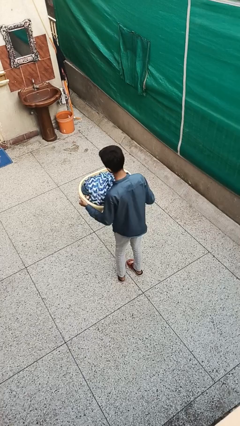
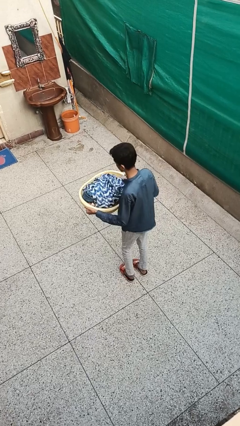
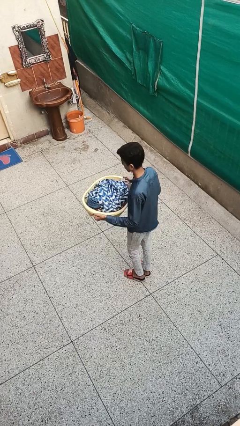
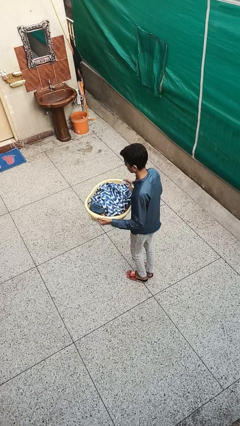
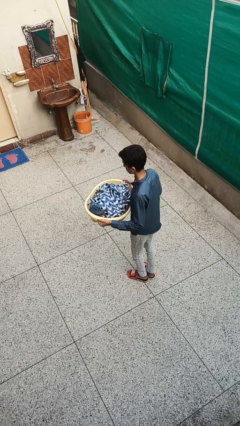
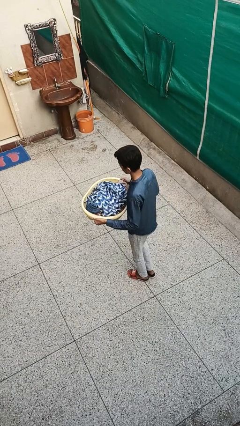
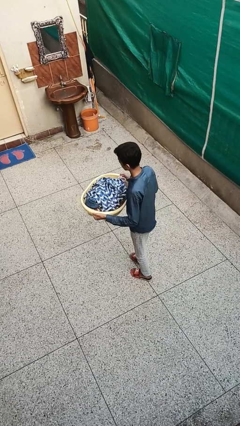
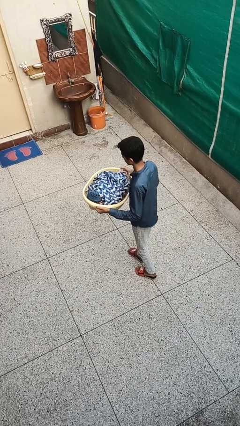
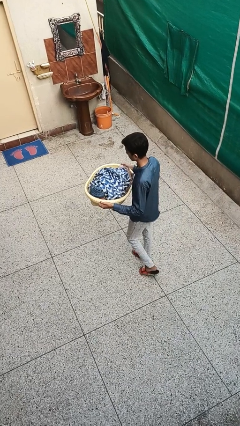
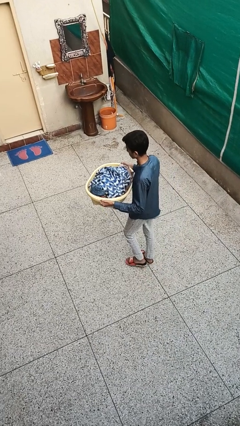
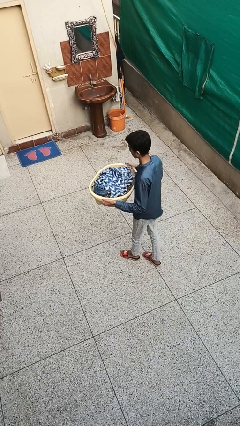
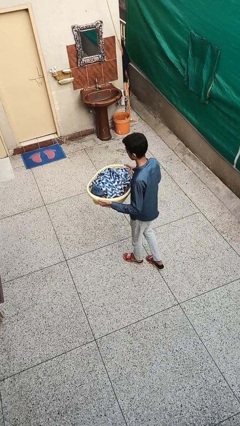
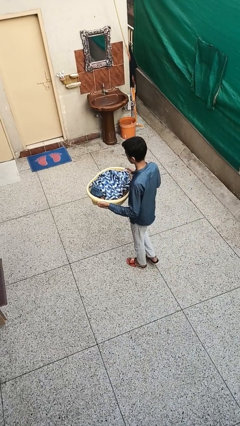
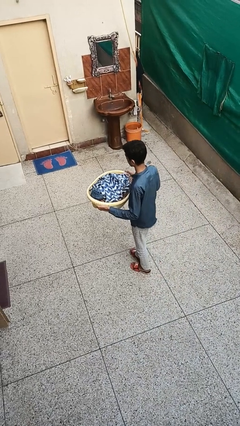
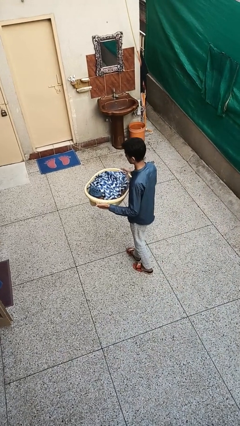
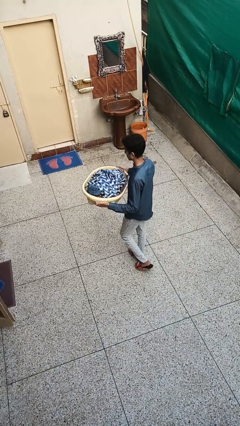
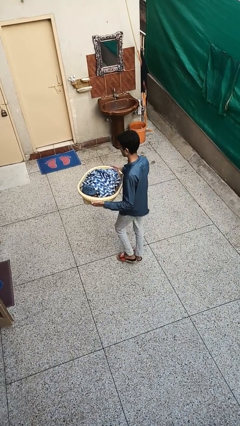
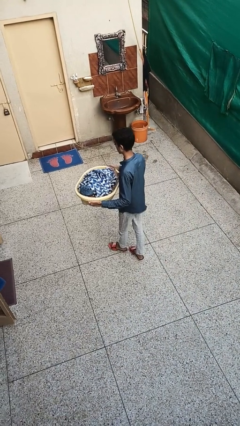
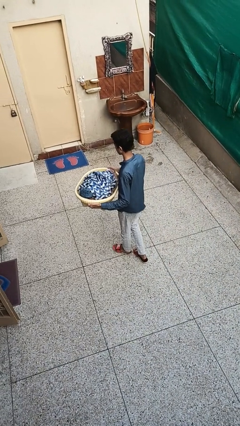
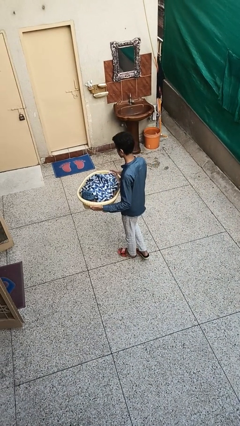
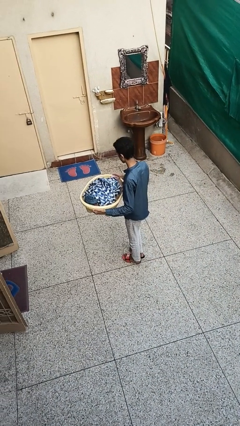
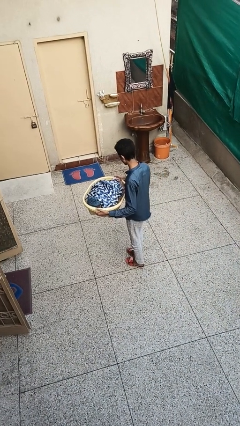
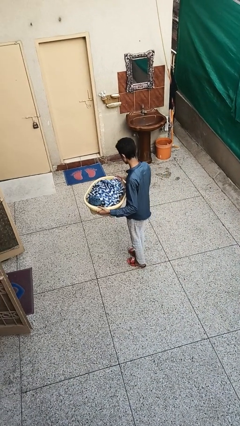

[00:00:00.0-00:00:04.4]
person carries laundry basket

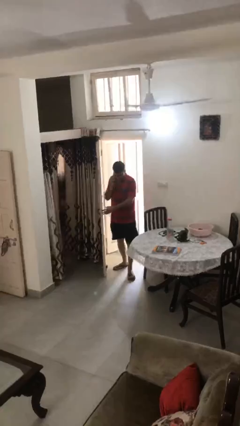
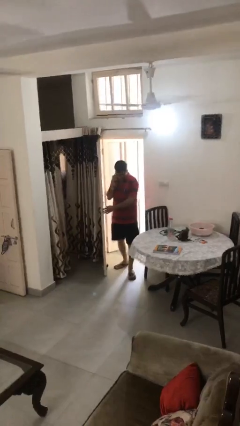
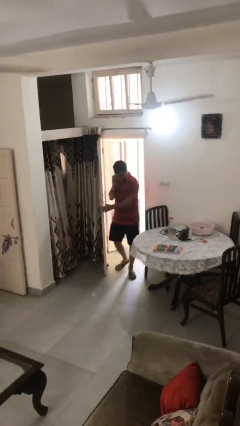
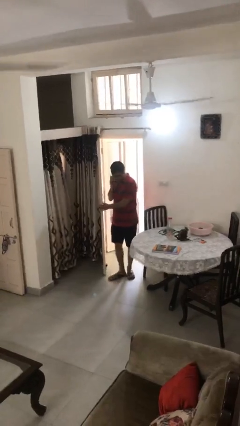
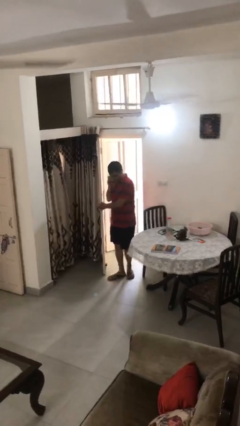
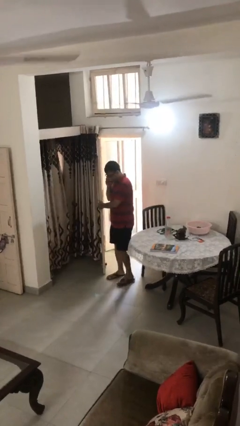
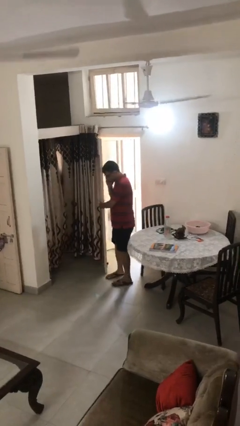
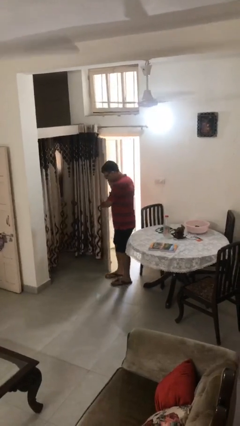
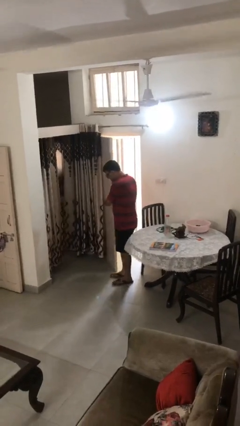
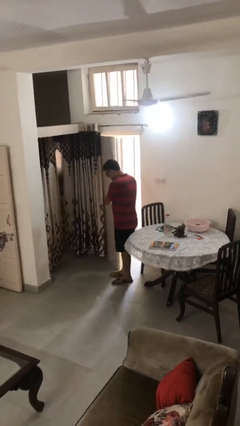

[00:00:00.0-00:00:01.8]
person enters scene through structure

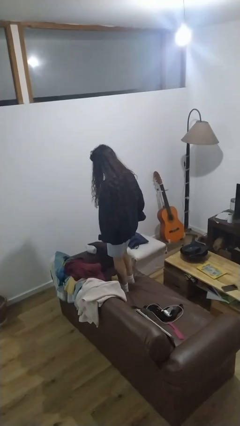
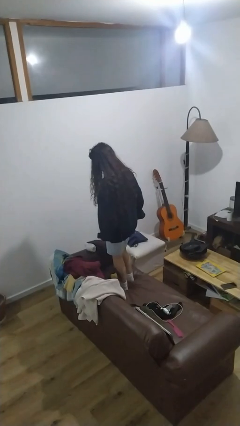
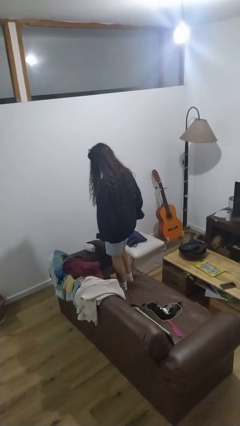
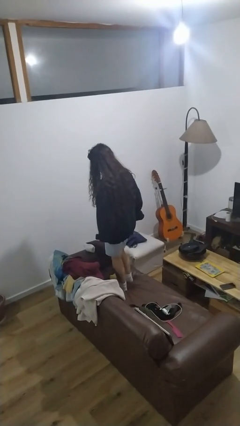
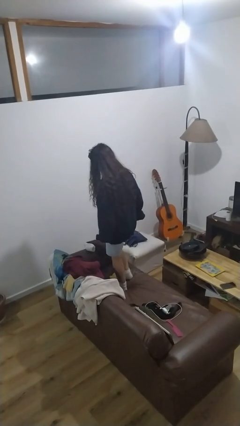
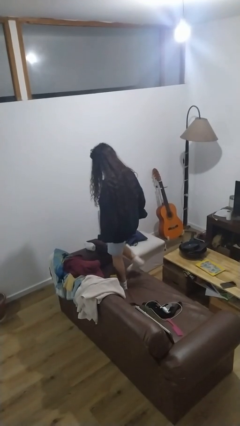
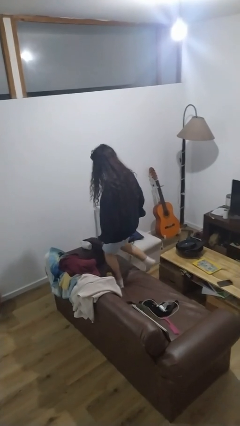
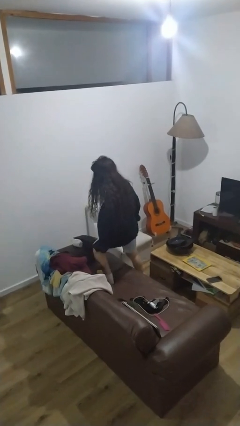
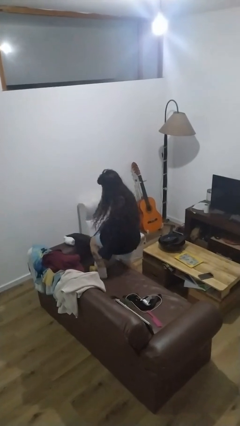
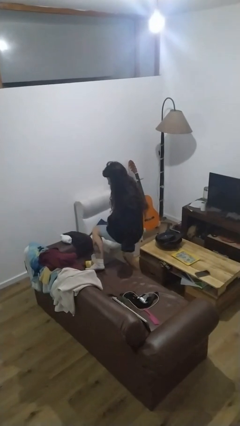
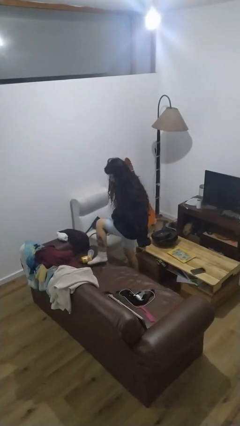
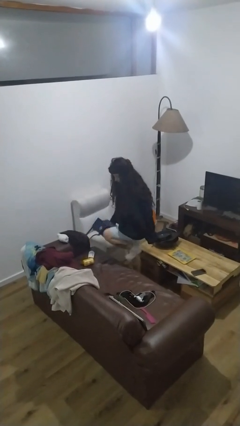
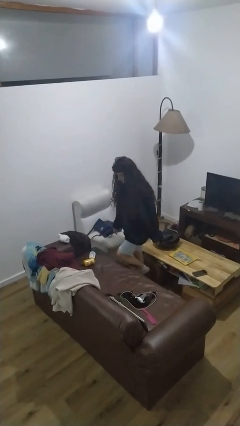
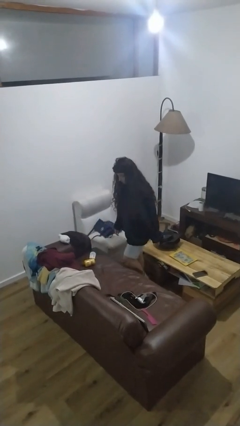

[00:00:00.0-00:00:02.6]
person climbs off couch

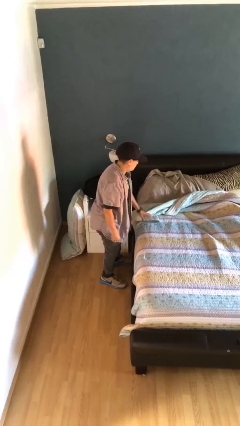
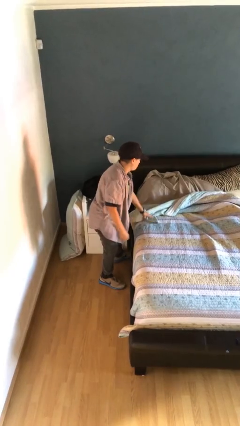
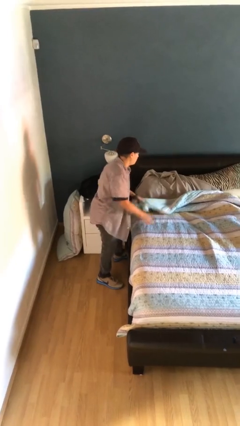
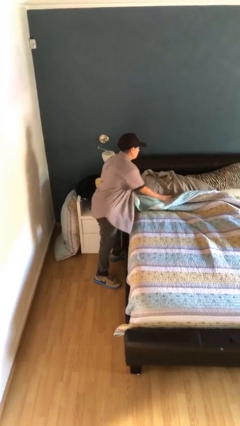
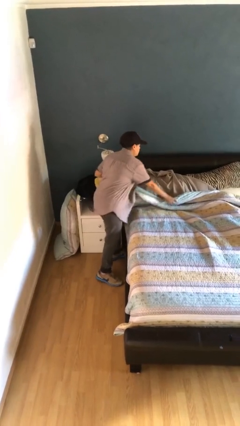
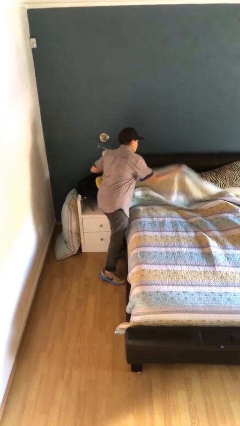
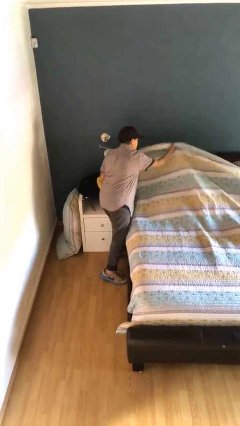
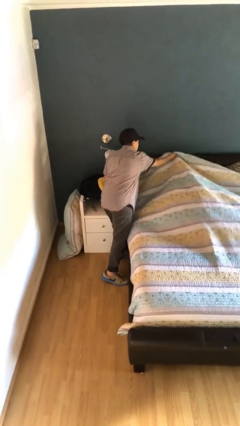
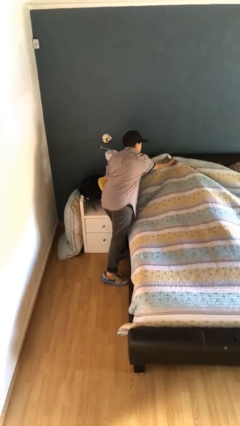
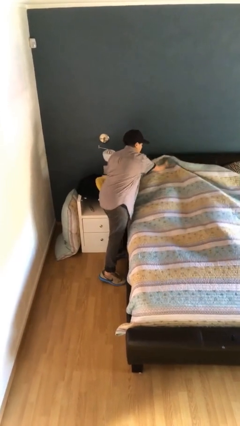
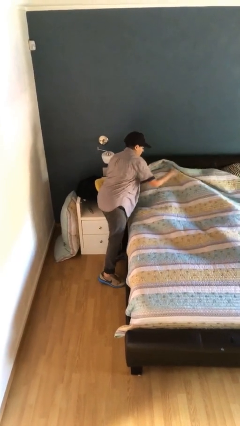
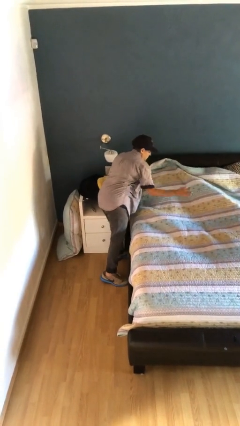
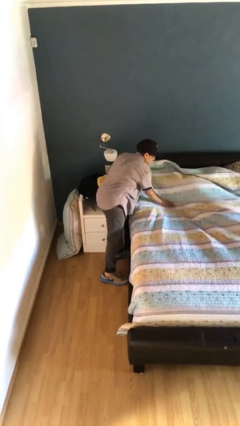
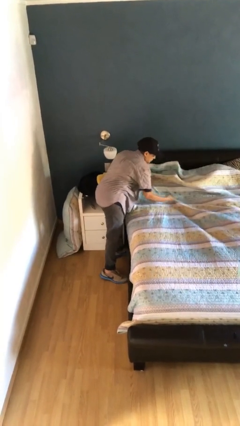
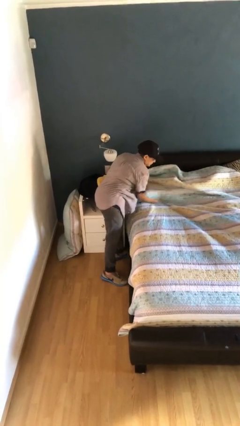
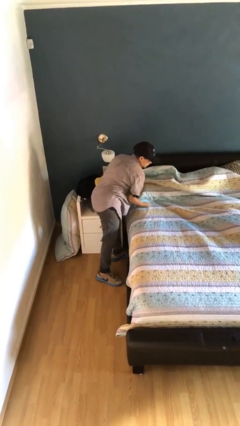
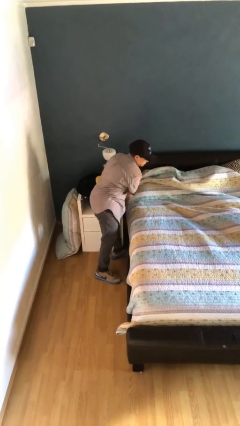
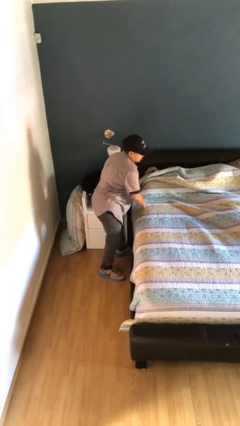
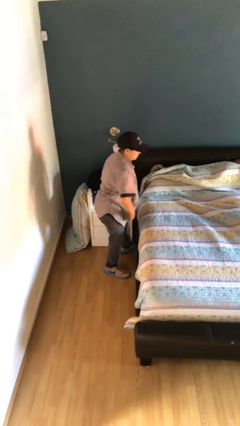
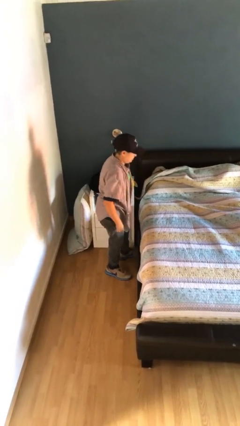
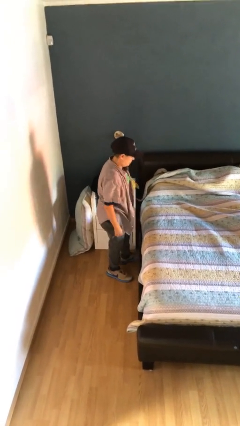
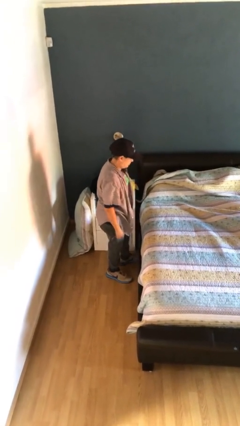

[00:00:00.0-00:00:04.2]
person makes bed

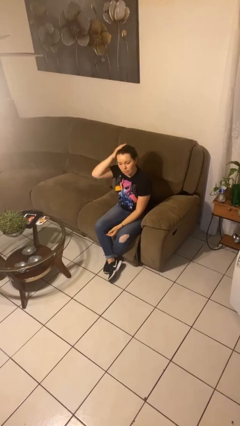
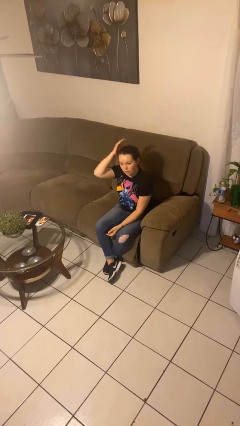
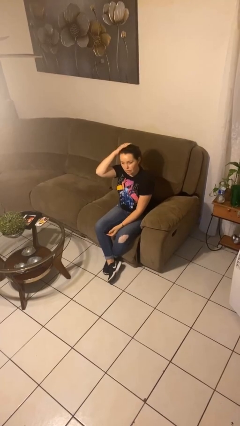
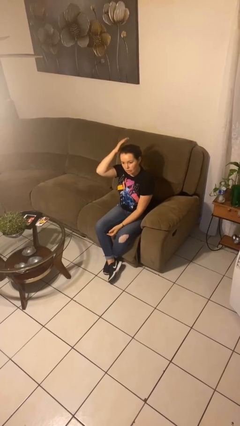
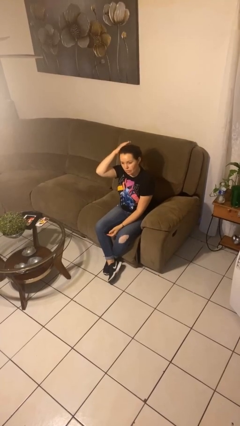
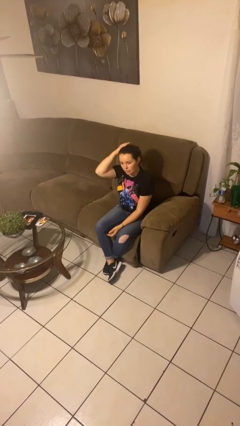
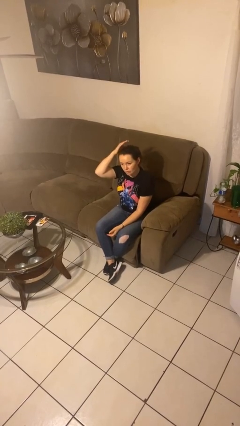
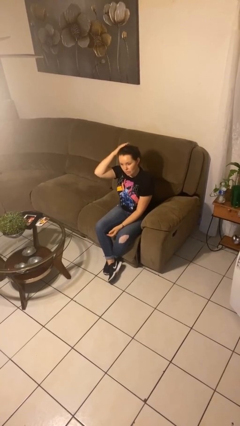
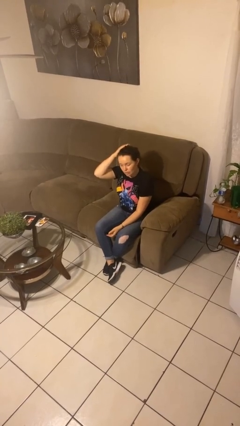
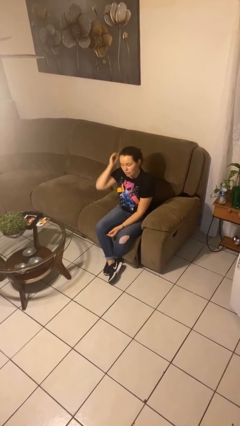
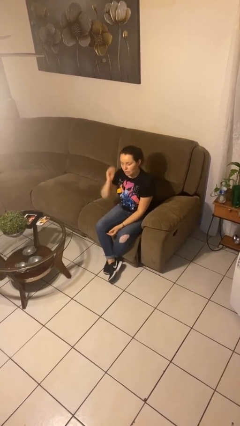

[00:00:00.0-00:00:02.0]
person pats head

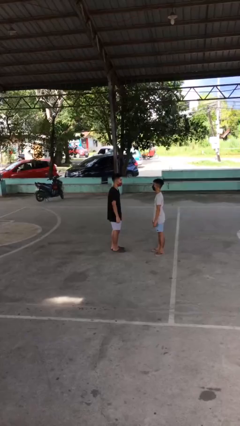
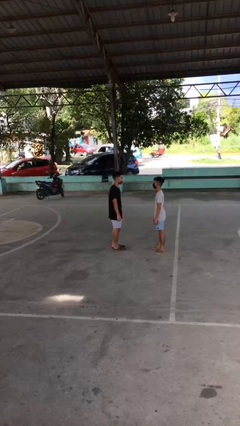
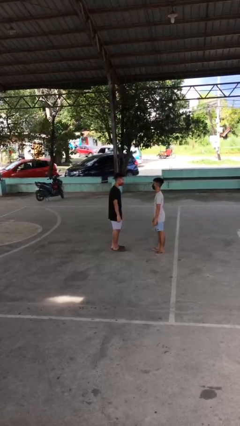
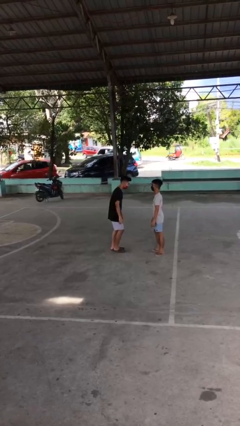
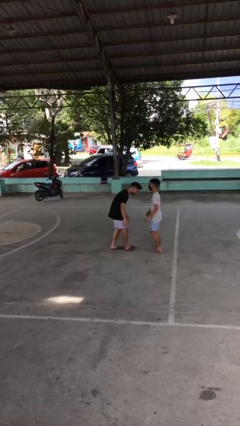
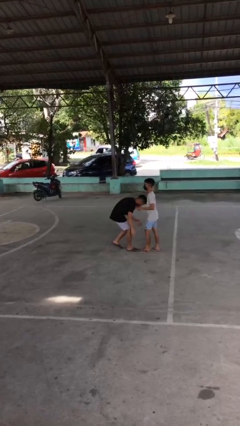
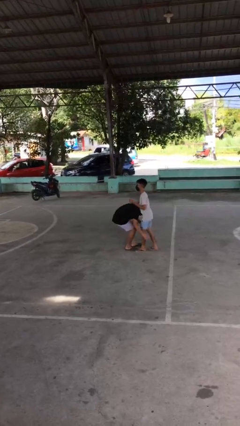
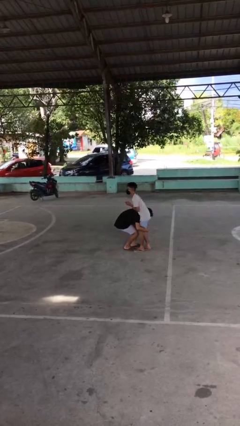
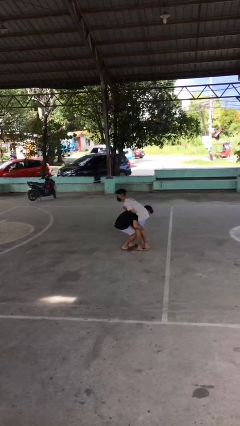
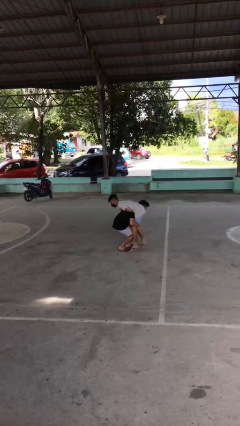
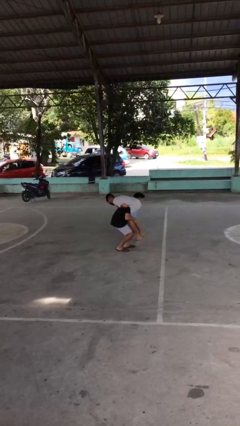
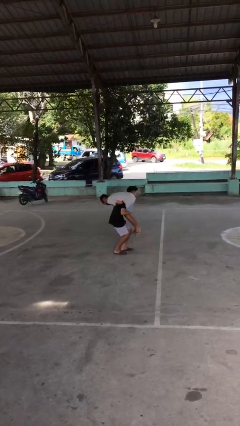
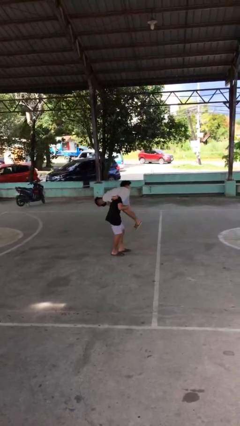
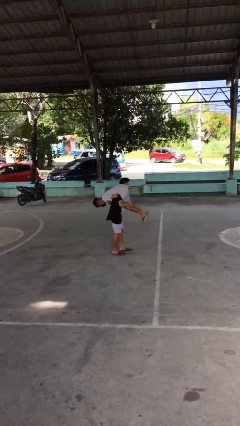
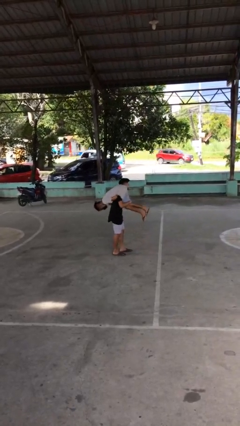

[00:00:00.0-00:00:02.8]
person carries person over shoulder
